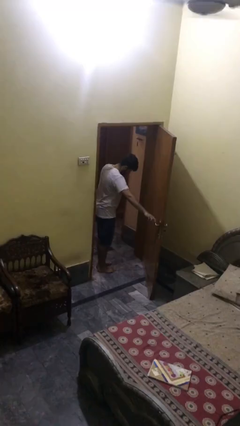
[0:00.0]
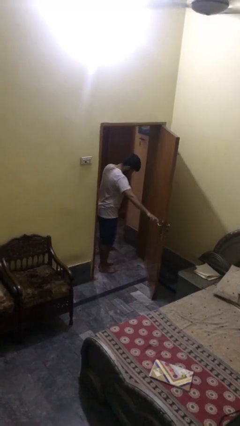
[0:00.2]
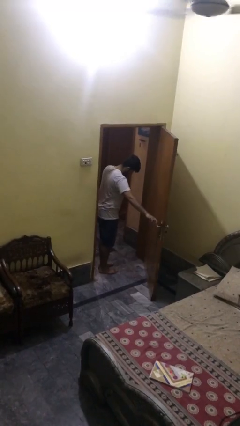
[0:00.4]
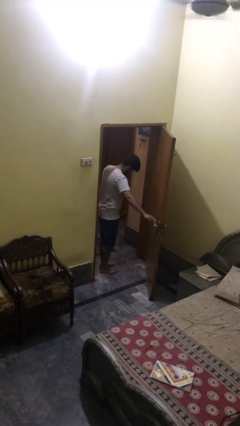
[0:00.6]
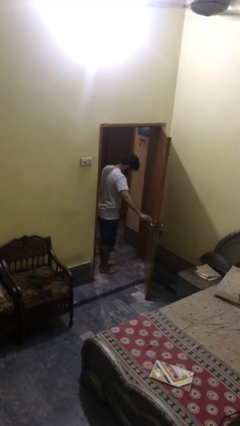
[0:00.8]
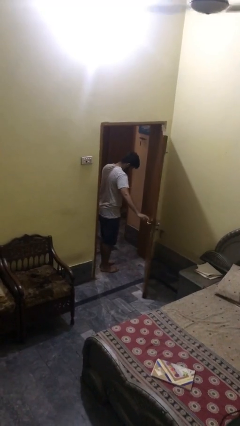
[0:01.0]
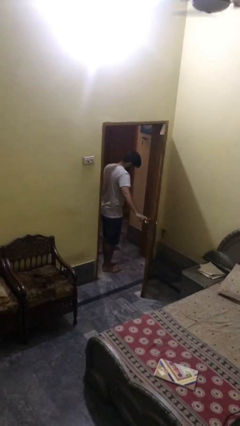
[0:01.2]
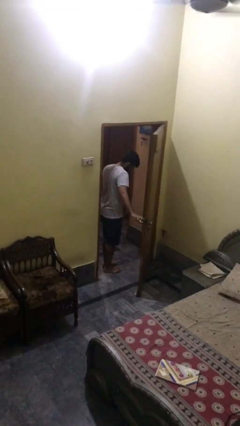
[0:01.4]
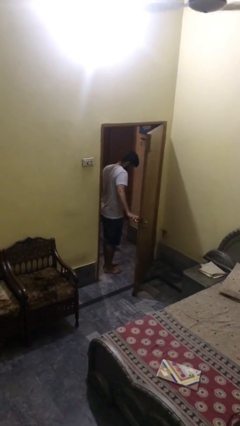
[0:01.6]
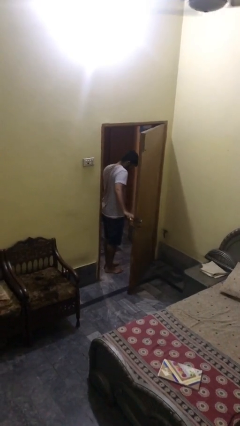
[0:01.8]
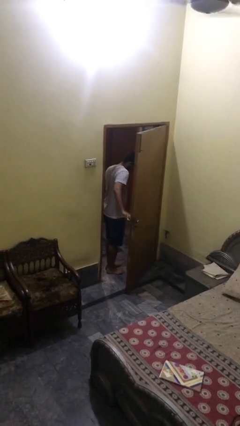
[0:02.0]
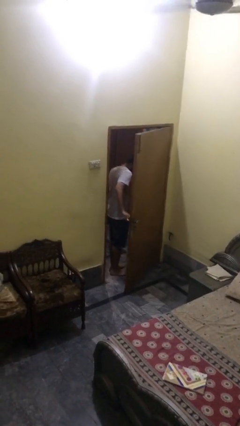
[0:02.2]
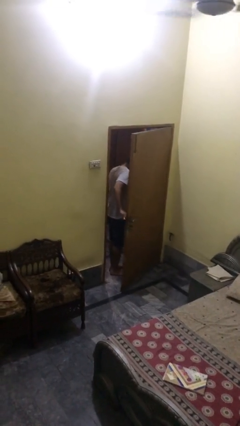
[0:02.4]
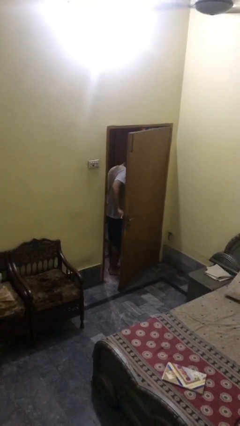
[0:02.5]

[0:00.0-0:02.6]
person closes facility door

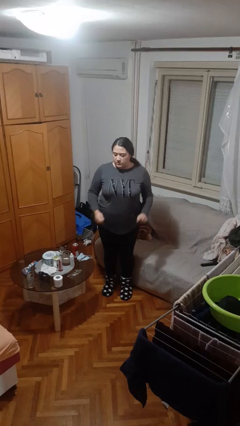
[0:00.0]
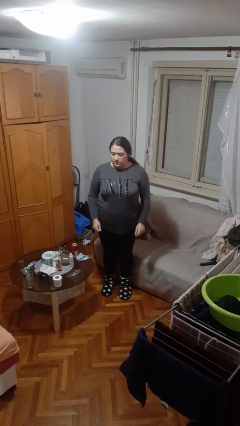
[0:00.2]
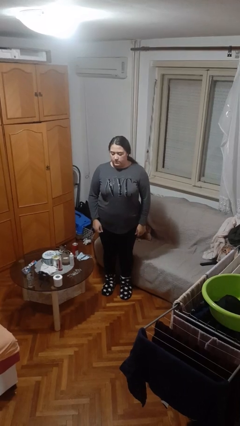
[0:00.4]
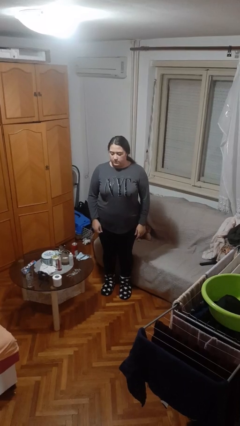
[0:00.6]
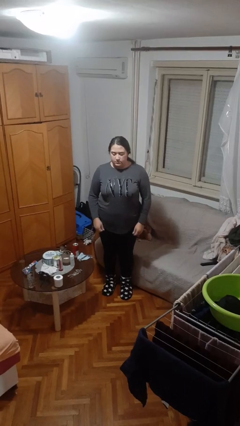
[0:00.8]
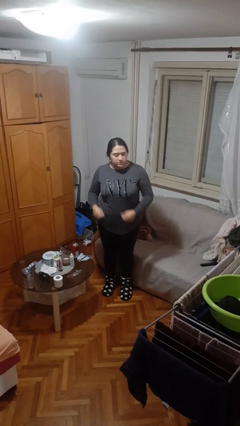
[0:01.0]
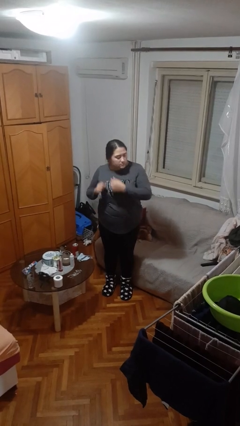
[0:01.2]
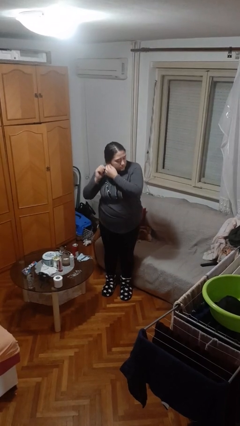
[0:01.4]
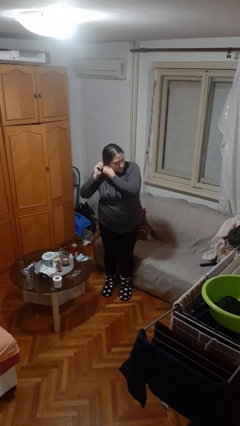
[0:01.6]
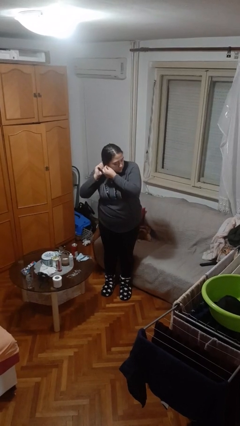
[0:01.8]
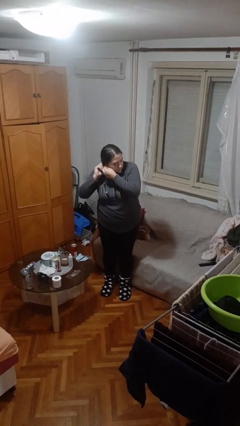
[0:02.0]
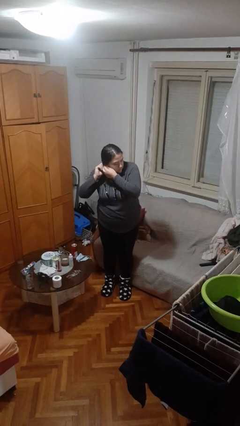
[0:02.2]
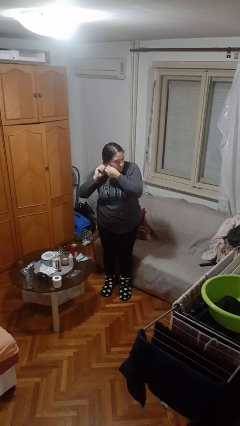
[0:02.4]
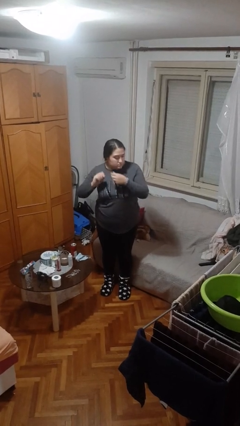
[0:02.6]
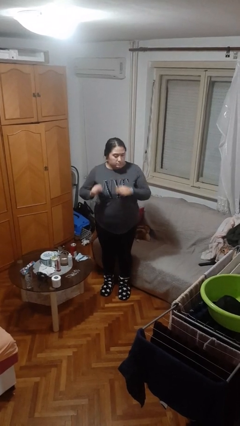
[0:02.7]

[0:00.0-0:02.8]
person puts on earrings

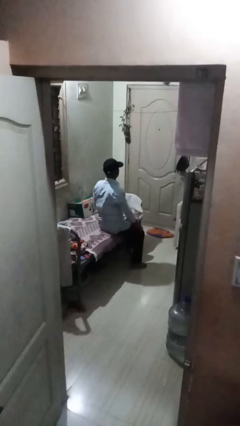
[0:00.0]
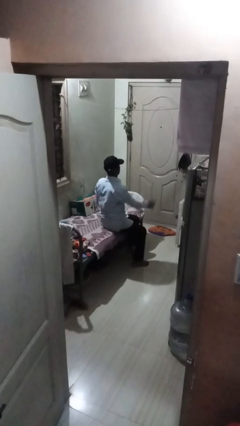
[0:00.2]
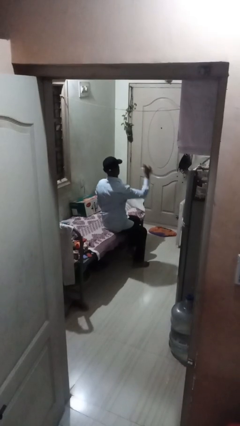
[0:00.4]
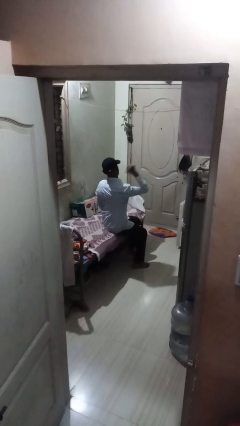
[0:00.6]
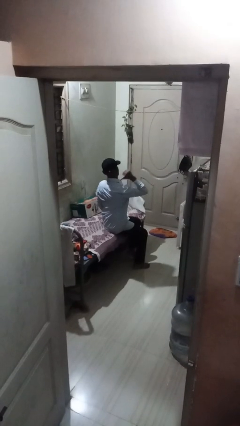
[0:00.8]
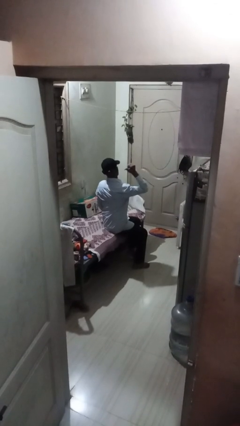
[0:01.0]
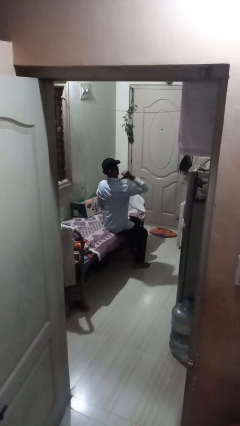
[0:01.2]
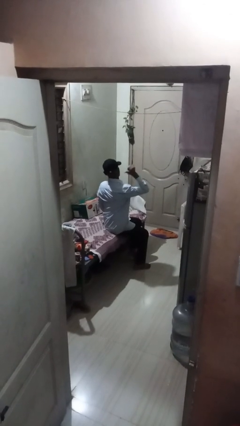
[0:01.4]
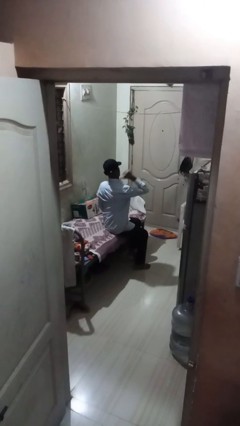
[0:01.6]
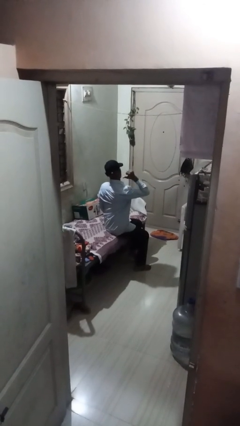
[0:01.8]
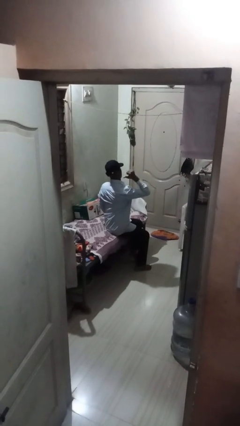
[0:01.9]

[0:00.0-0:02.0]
person gestures behind me

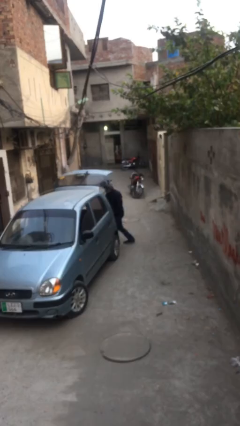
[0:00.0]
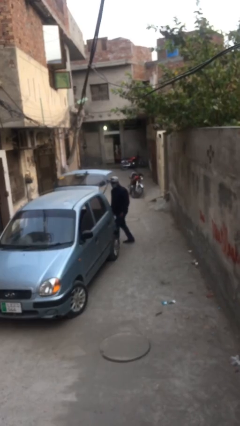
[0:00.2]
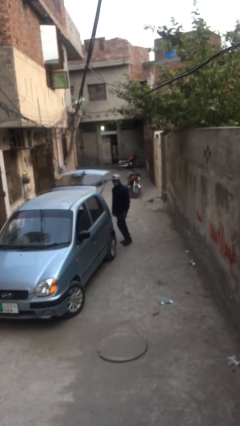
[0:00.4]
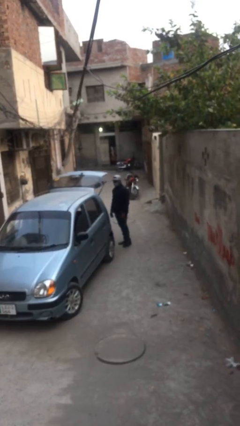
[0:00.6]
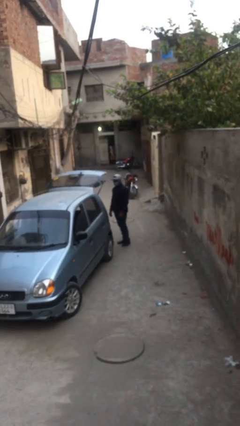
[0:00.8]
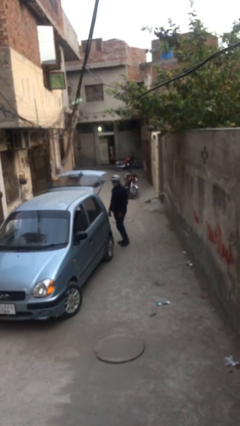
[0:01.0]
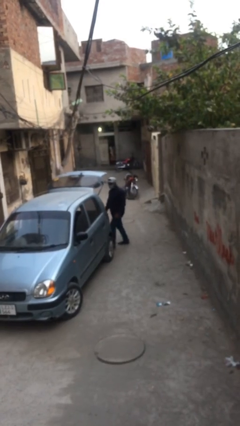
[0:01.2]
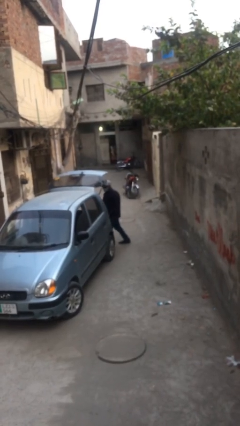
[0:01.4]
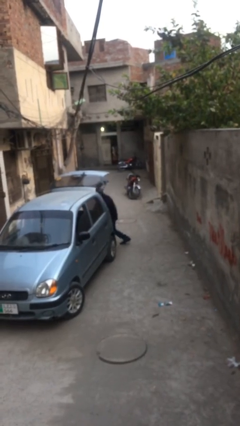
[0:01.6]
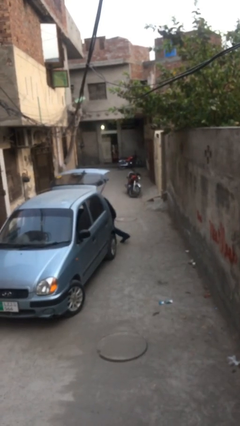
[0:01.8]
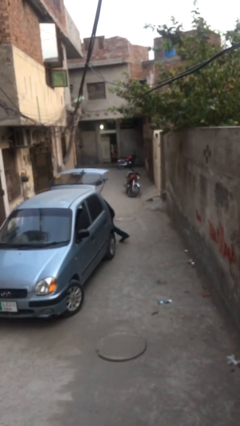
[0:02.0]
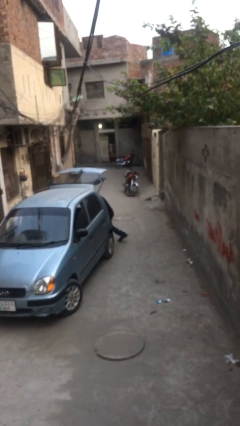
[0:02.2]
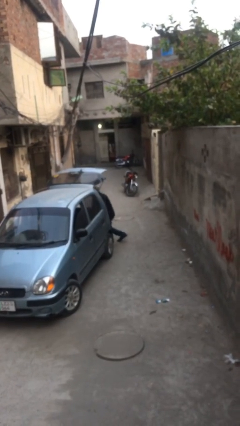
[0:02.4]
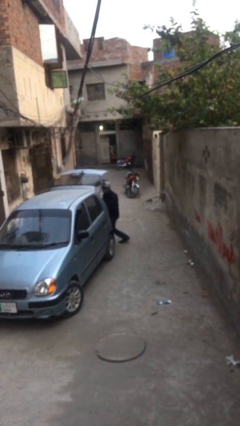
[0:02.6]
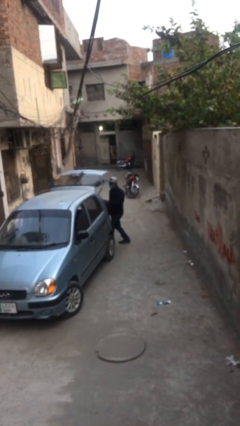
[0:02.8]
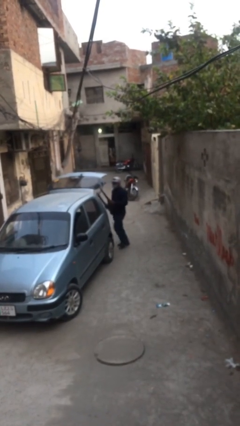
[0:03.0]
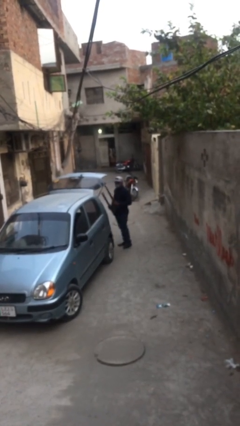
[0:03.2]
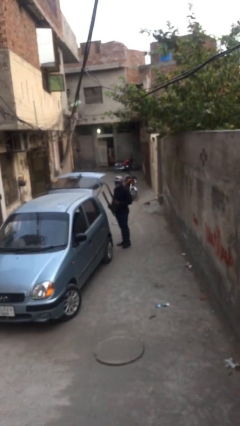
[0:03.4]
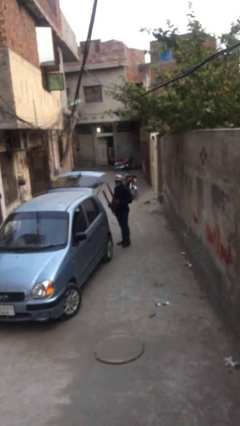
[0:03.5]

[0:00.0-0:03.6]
person unloads car

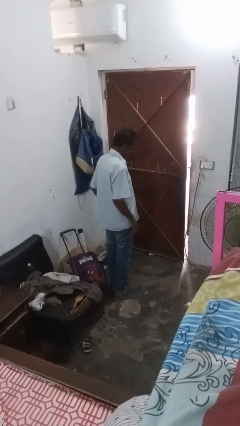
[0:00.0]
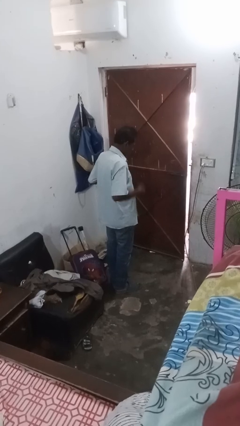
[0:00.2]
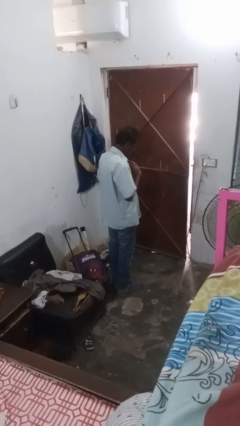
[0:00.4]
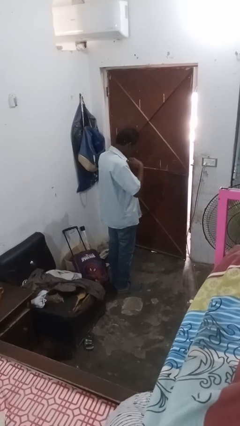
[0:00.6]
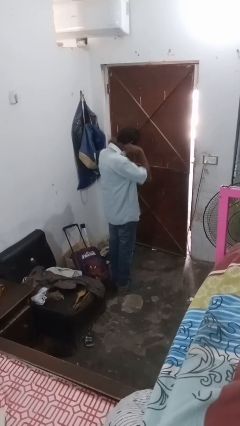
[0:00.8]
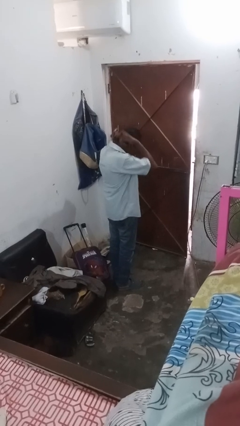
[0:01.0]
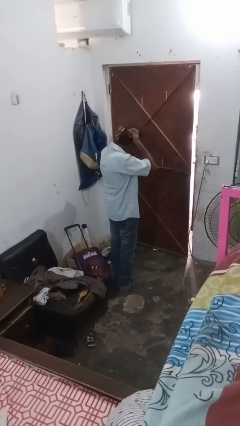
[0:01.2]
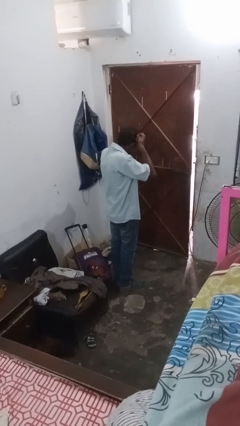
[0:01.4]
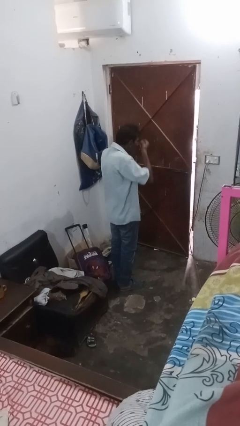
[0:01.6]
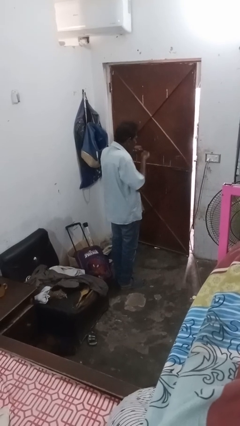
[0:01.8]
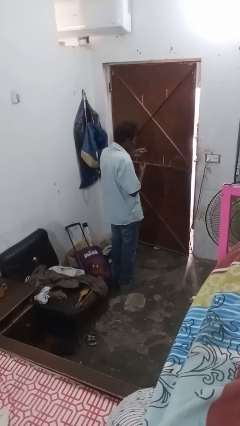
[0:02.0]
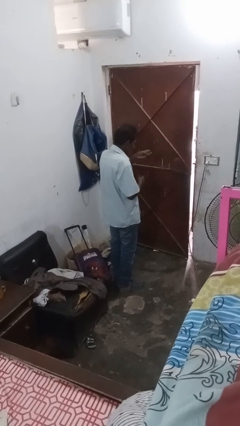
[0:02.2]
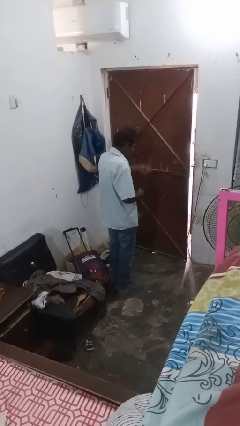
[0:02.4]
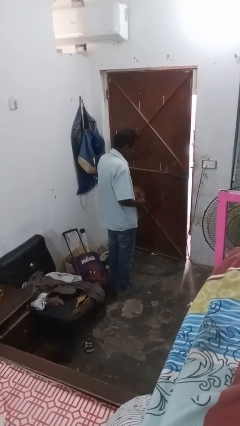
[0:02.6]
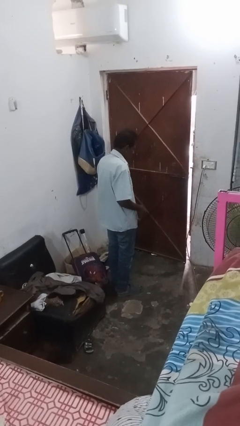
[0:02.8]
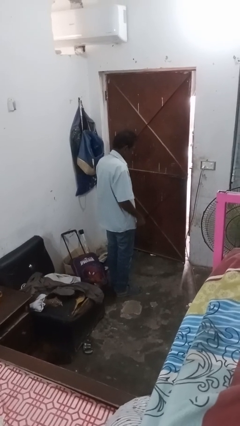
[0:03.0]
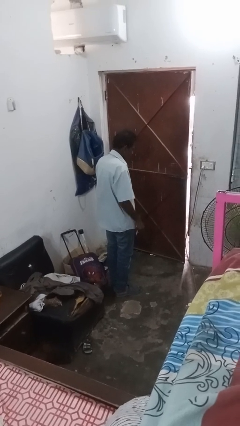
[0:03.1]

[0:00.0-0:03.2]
person takes off necklace

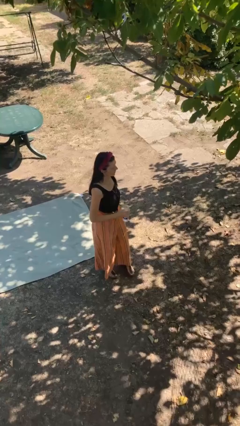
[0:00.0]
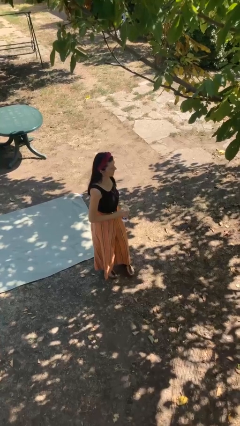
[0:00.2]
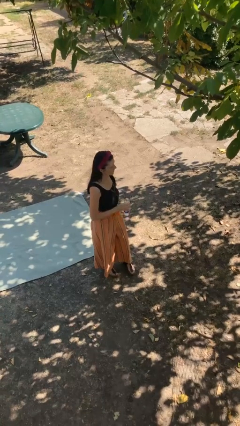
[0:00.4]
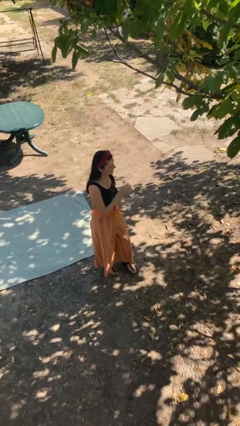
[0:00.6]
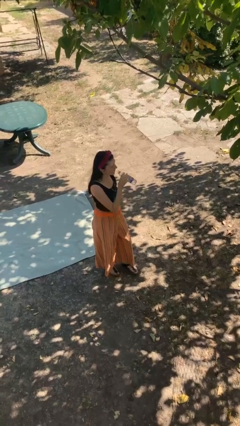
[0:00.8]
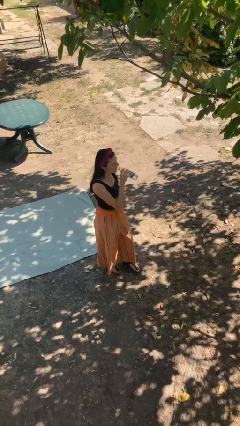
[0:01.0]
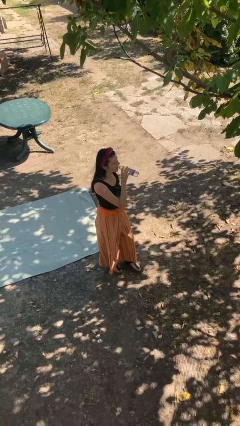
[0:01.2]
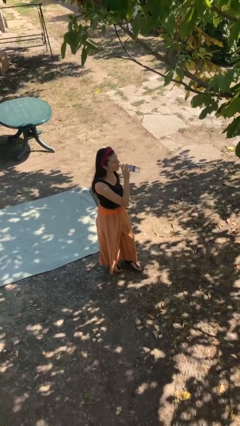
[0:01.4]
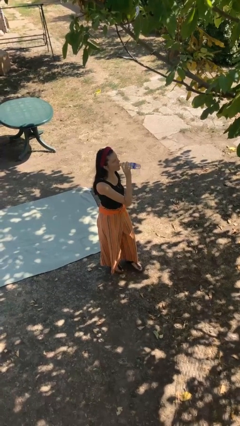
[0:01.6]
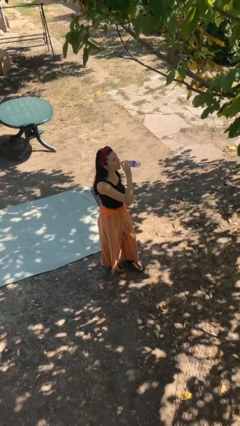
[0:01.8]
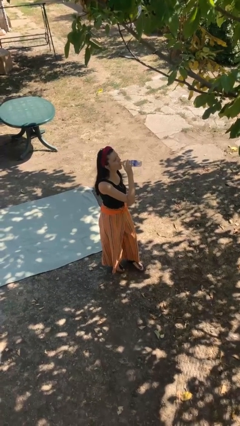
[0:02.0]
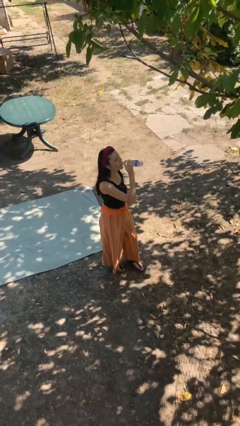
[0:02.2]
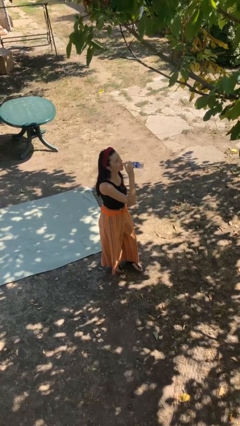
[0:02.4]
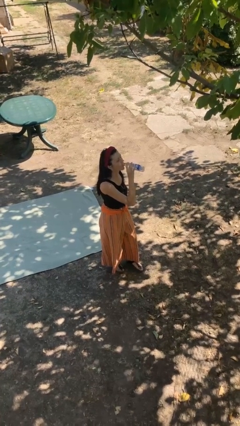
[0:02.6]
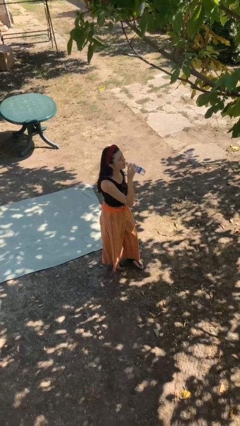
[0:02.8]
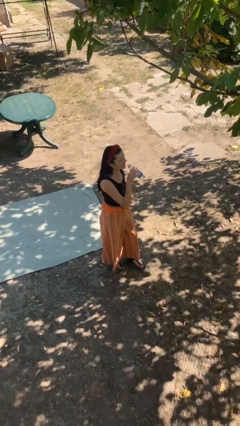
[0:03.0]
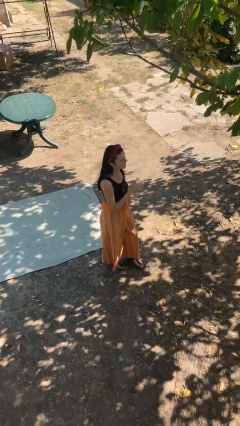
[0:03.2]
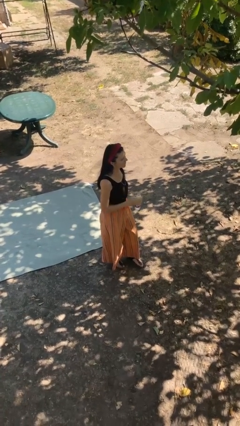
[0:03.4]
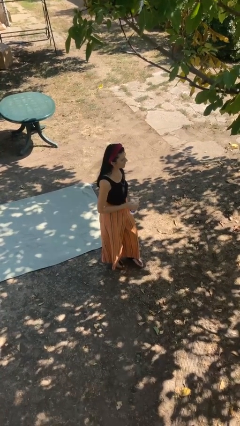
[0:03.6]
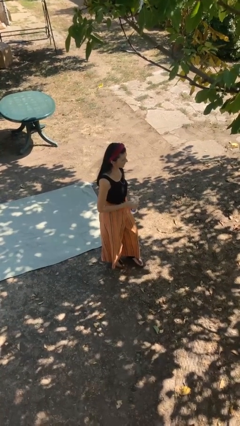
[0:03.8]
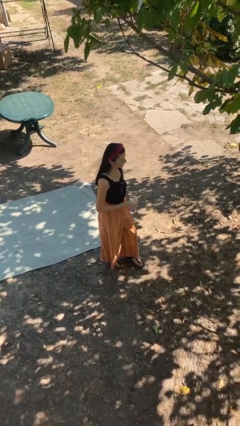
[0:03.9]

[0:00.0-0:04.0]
person drinks from bottle
